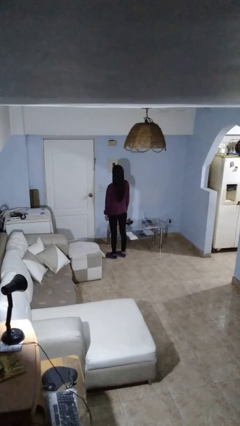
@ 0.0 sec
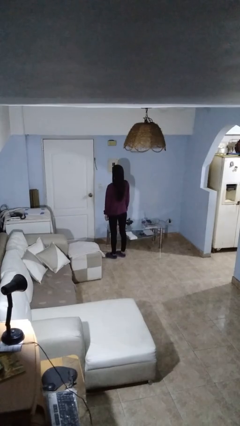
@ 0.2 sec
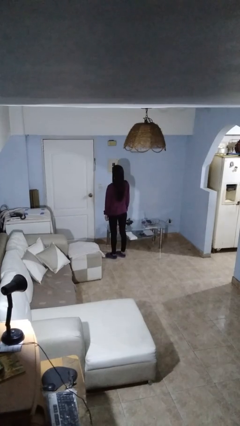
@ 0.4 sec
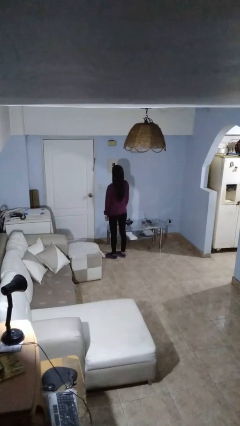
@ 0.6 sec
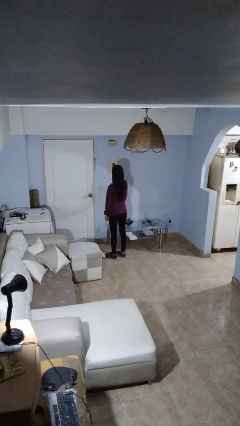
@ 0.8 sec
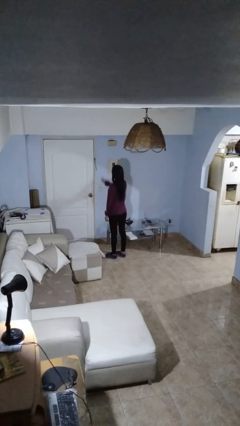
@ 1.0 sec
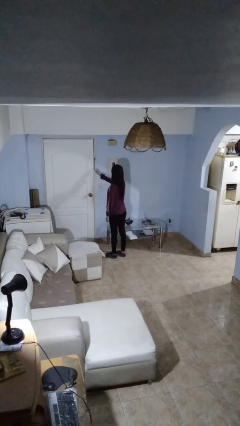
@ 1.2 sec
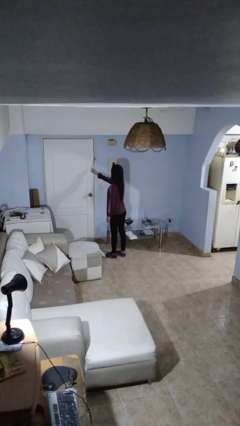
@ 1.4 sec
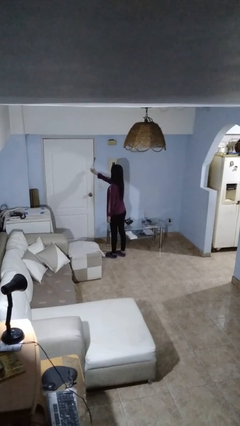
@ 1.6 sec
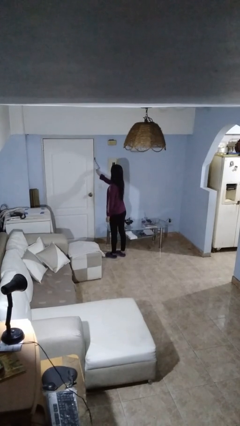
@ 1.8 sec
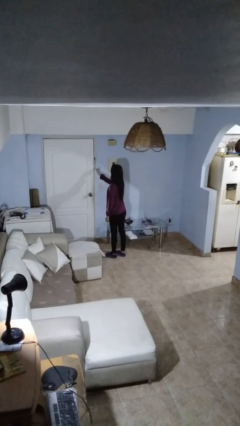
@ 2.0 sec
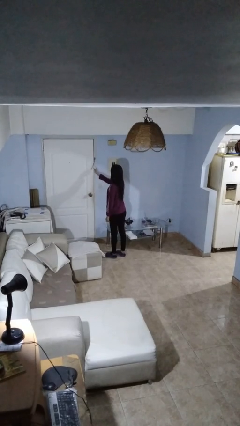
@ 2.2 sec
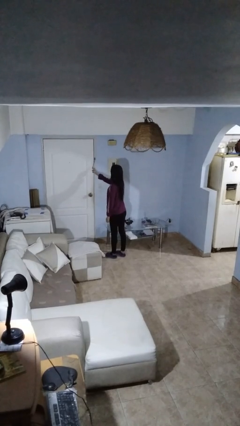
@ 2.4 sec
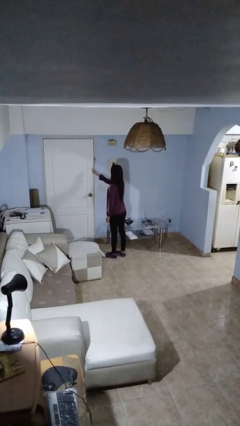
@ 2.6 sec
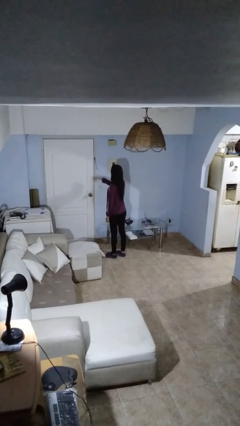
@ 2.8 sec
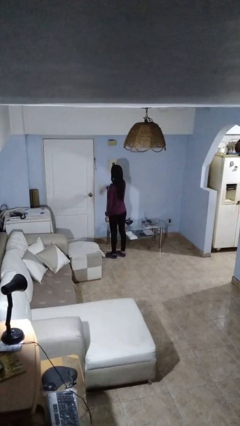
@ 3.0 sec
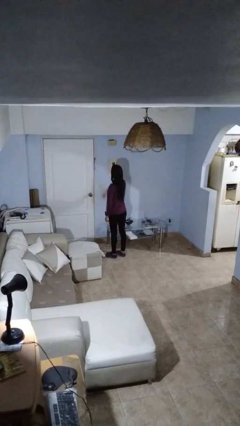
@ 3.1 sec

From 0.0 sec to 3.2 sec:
person taps object with finger

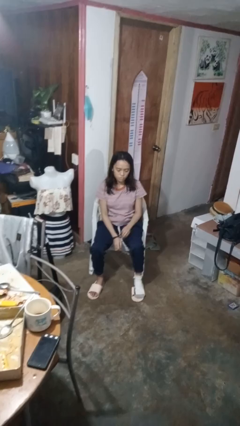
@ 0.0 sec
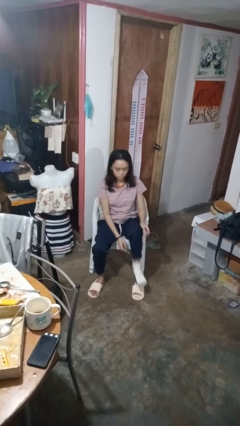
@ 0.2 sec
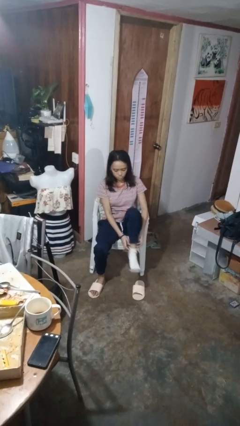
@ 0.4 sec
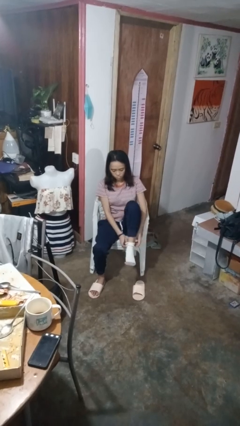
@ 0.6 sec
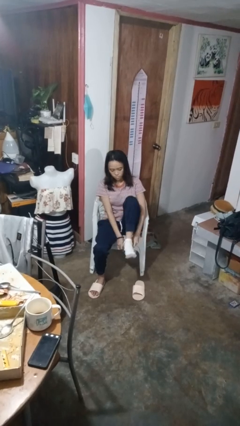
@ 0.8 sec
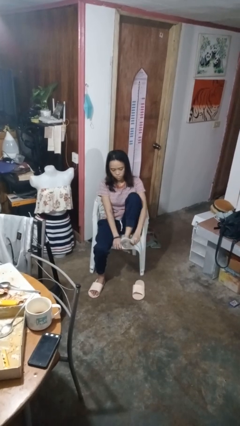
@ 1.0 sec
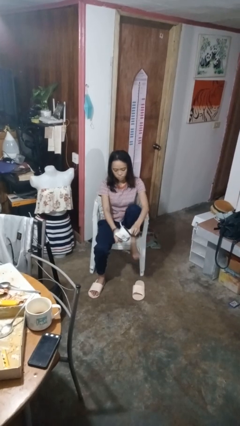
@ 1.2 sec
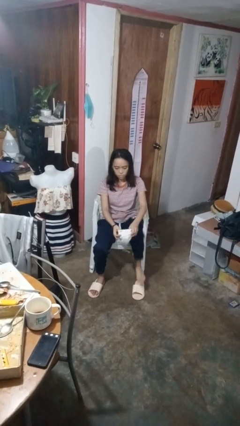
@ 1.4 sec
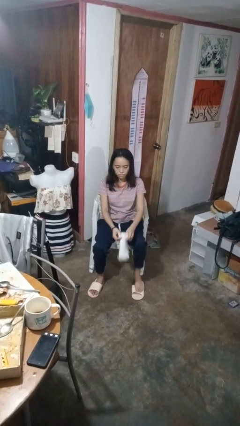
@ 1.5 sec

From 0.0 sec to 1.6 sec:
person takes off socks

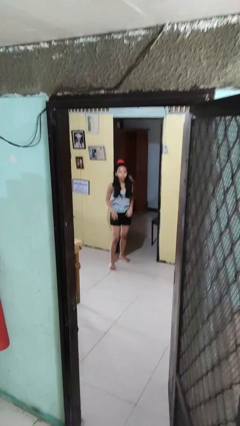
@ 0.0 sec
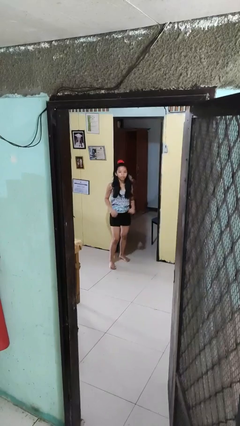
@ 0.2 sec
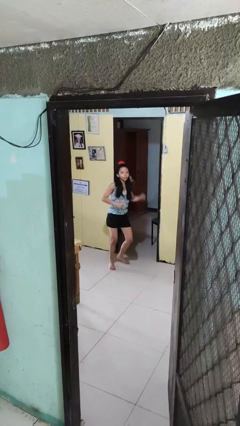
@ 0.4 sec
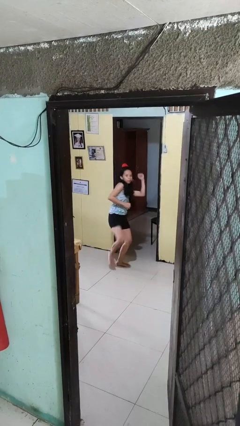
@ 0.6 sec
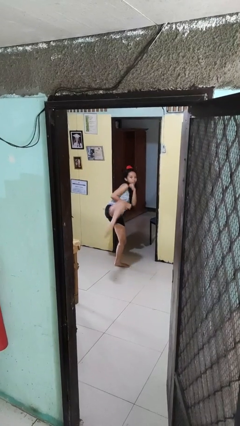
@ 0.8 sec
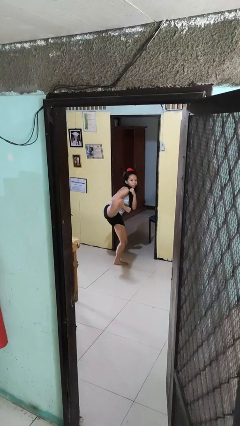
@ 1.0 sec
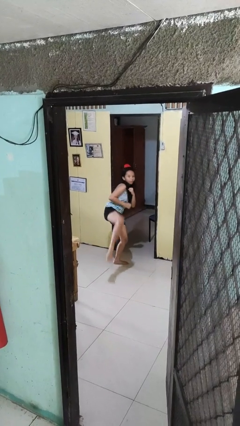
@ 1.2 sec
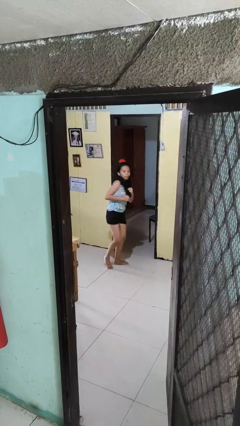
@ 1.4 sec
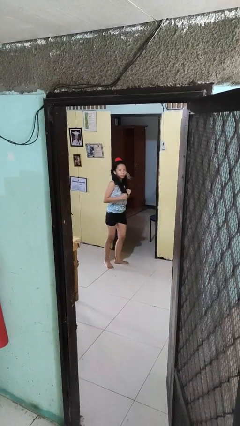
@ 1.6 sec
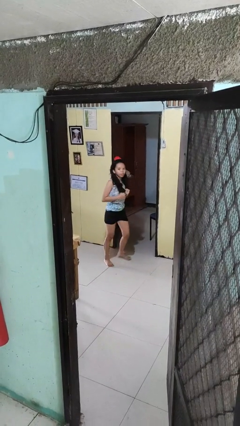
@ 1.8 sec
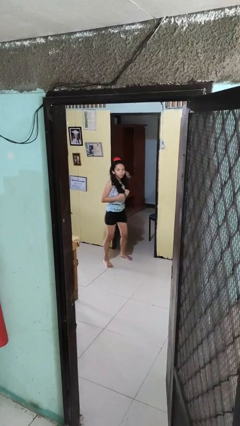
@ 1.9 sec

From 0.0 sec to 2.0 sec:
person karate kicks

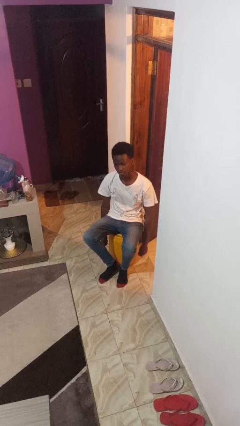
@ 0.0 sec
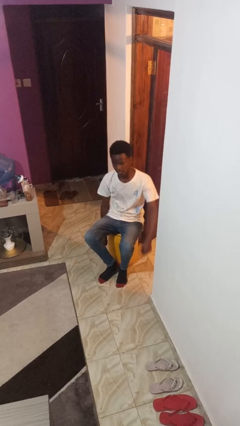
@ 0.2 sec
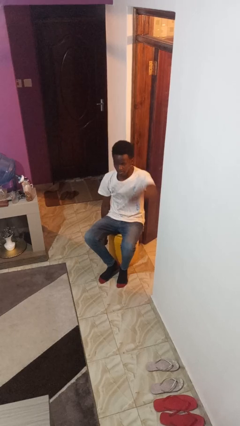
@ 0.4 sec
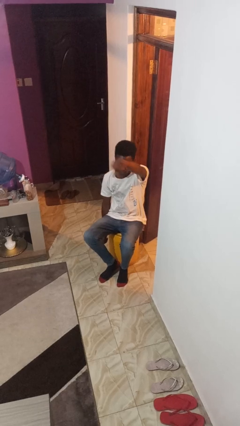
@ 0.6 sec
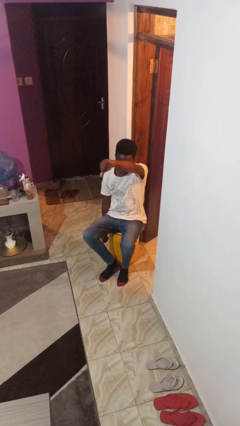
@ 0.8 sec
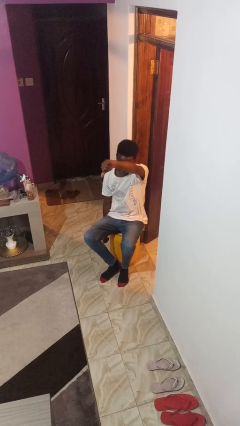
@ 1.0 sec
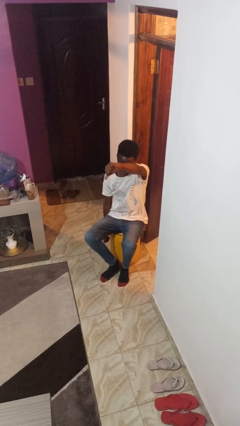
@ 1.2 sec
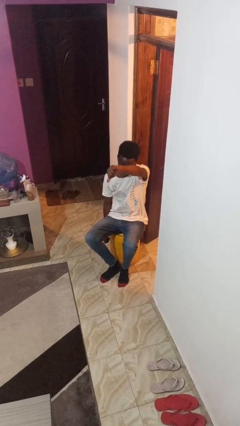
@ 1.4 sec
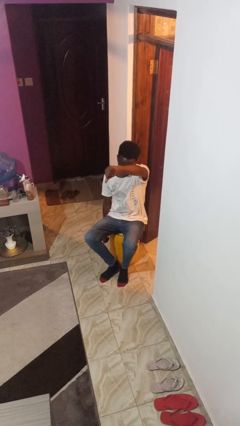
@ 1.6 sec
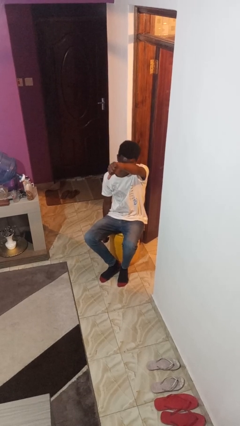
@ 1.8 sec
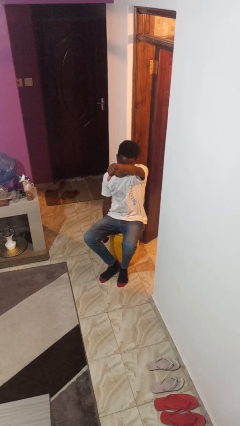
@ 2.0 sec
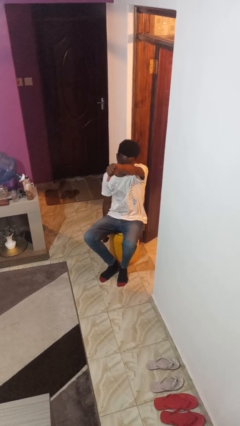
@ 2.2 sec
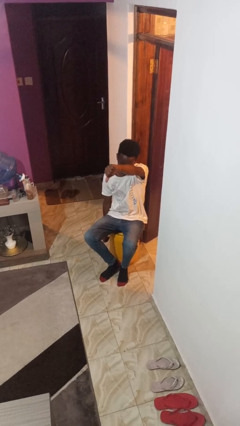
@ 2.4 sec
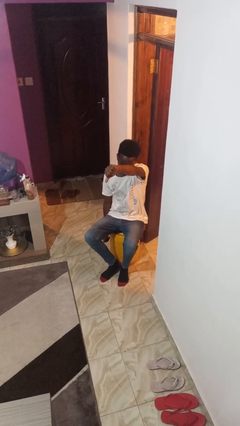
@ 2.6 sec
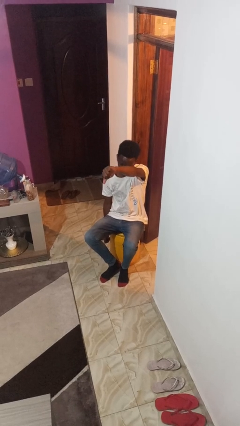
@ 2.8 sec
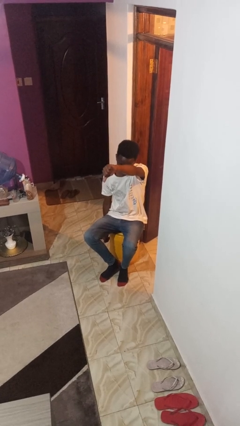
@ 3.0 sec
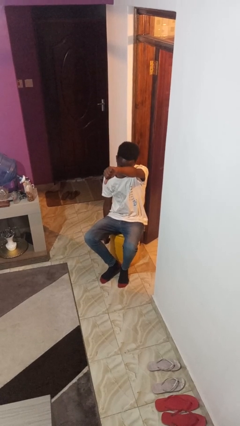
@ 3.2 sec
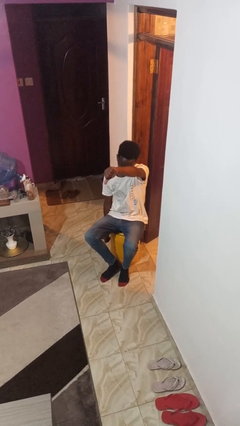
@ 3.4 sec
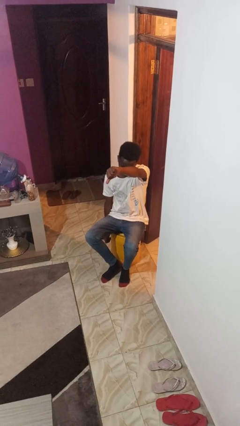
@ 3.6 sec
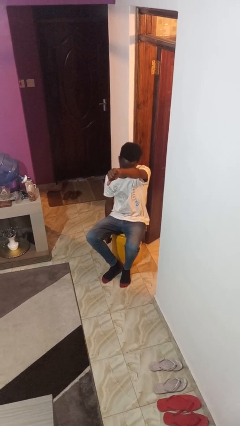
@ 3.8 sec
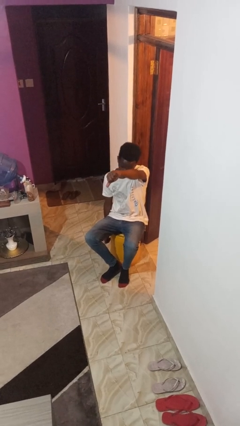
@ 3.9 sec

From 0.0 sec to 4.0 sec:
person gestures thumbs down

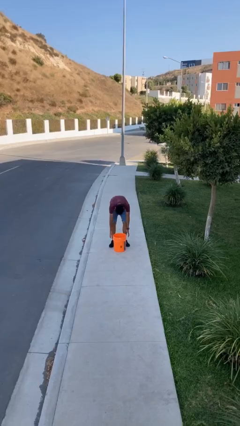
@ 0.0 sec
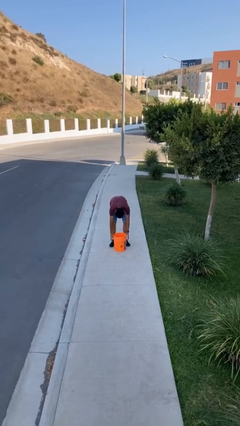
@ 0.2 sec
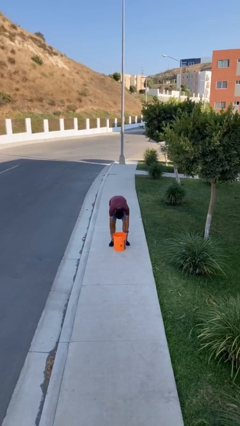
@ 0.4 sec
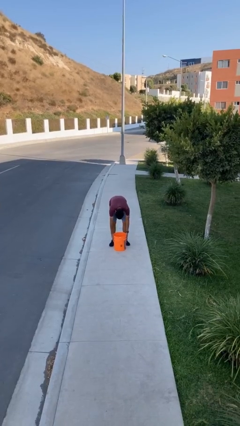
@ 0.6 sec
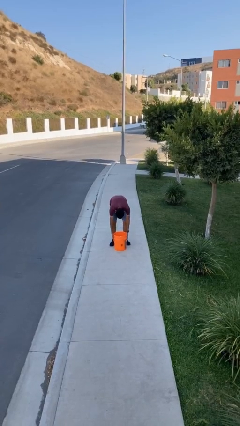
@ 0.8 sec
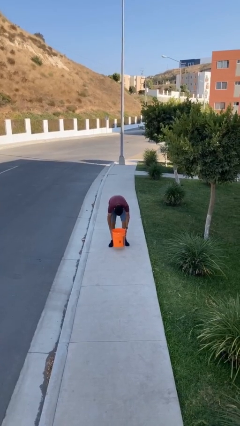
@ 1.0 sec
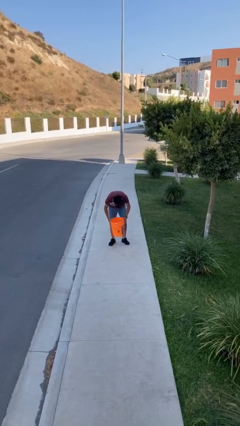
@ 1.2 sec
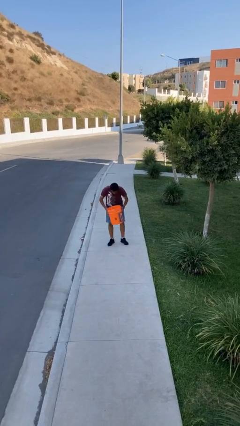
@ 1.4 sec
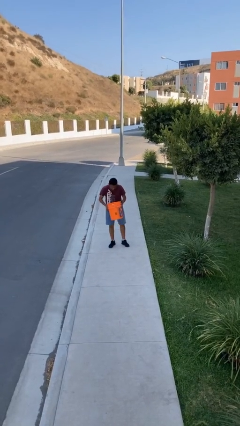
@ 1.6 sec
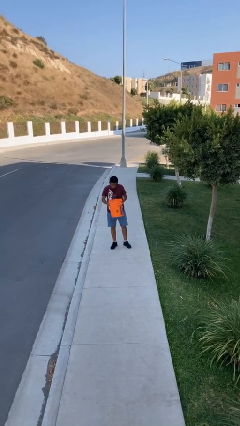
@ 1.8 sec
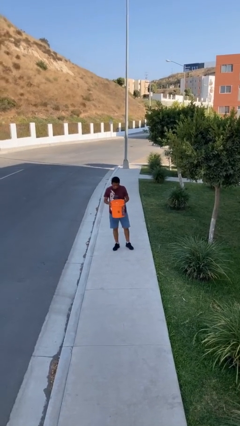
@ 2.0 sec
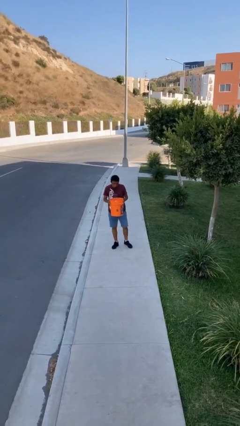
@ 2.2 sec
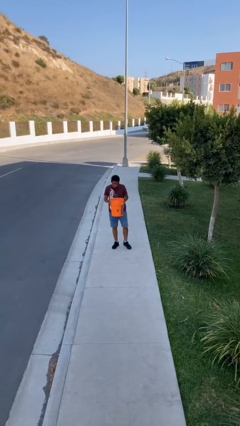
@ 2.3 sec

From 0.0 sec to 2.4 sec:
person picks up object from floor

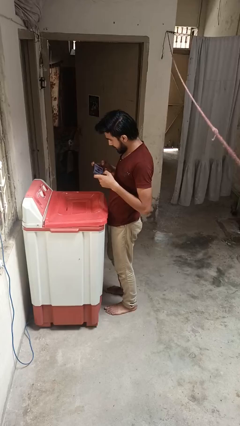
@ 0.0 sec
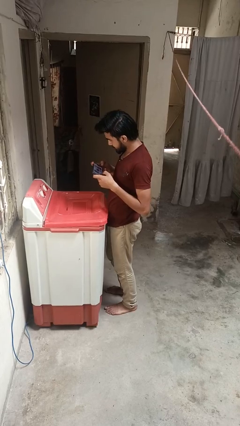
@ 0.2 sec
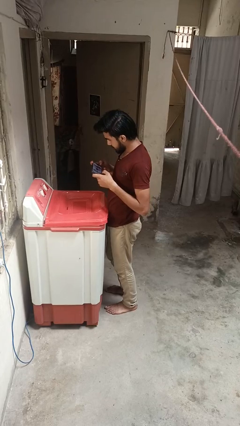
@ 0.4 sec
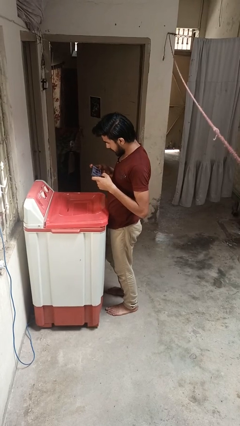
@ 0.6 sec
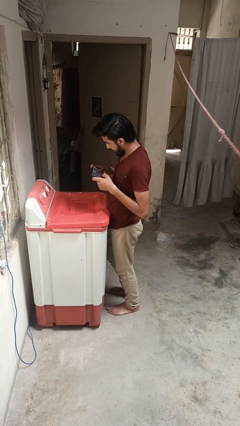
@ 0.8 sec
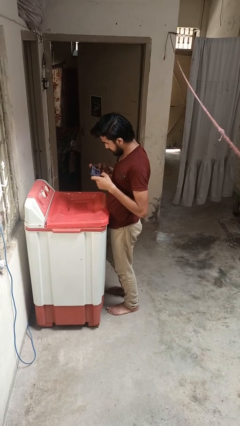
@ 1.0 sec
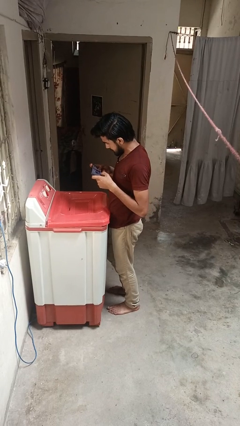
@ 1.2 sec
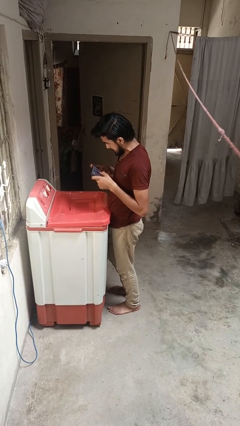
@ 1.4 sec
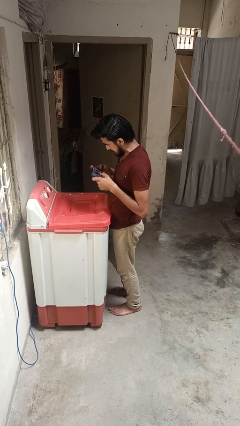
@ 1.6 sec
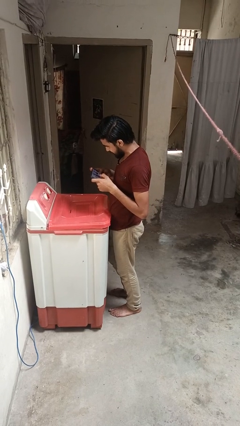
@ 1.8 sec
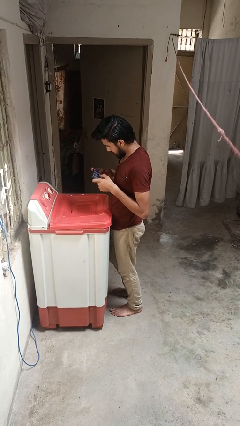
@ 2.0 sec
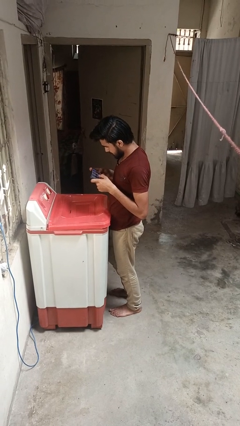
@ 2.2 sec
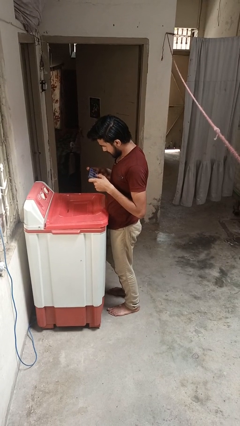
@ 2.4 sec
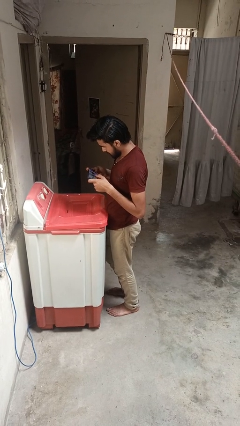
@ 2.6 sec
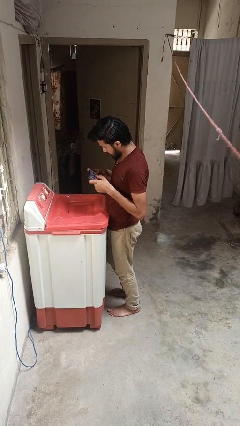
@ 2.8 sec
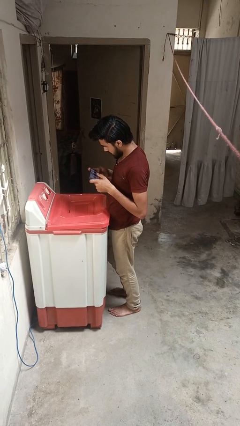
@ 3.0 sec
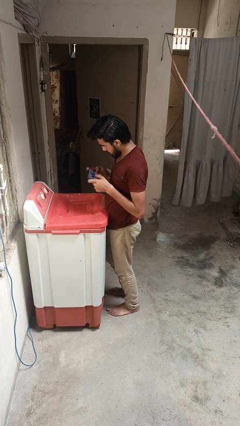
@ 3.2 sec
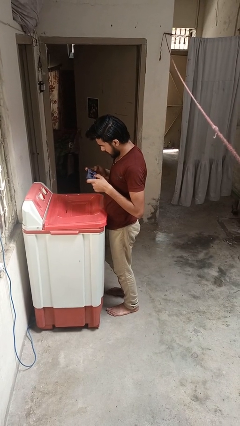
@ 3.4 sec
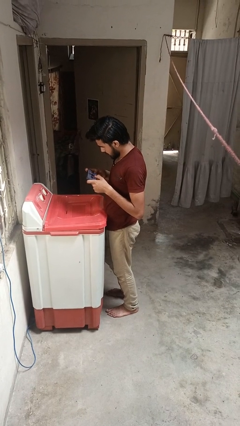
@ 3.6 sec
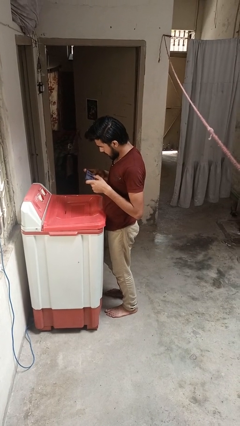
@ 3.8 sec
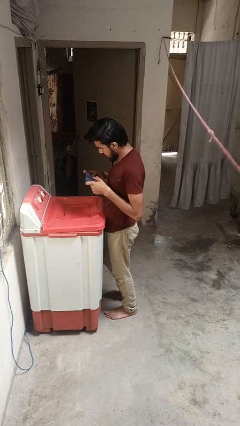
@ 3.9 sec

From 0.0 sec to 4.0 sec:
person interacts with tablet
